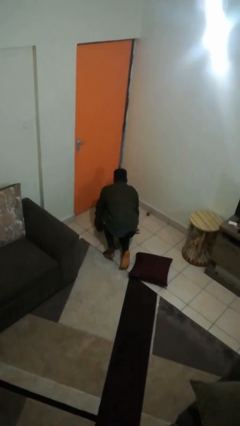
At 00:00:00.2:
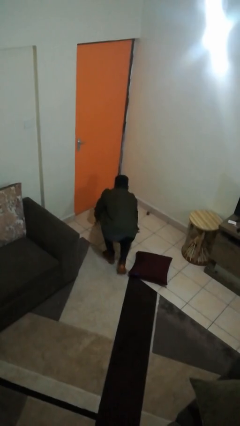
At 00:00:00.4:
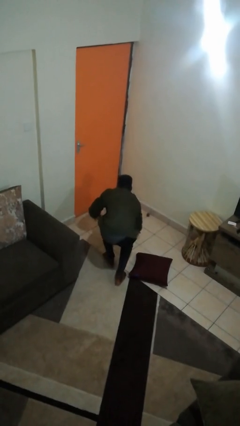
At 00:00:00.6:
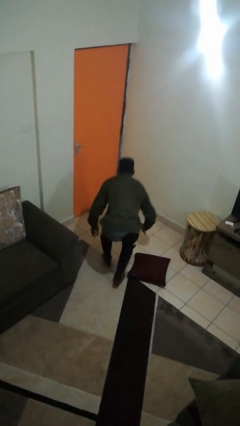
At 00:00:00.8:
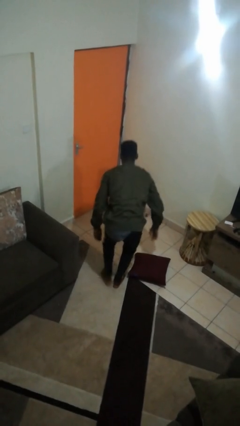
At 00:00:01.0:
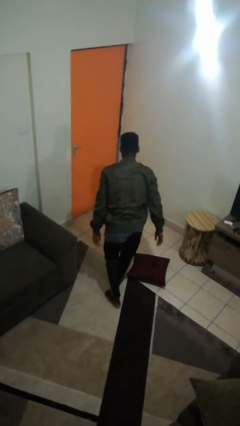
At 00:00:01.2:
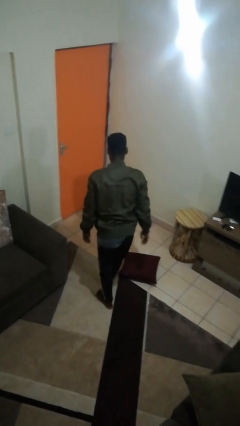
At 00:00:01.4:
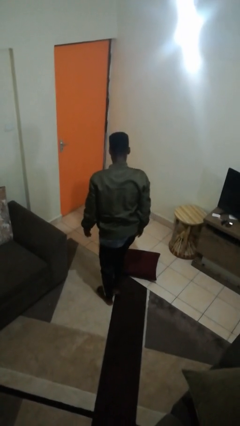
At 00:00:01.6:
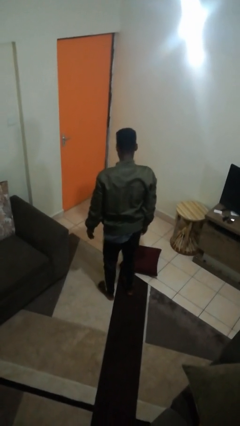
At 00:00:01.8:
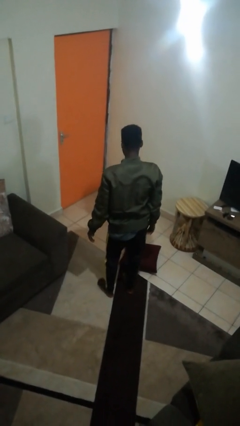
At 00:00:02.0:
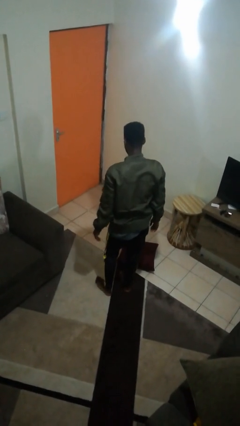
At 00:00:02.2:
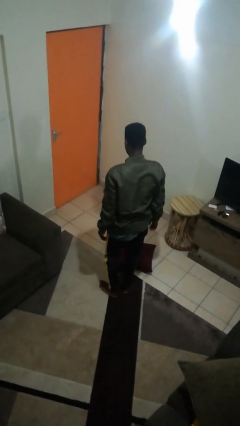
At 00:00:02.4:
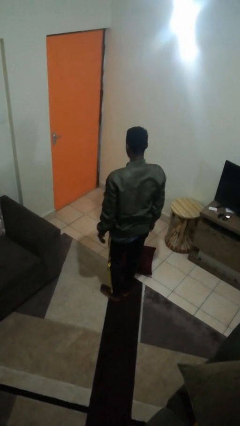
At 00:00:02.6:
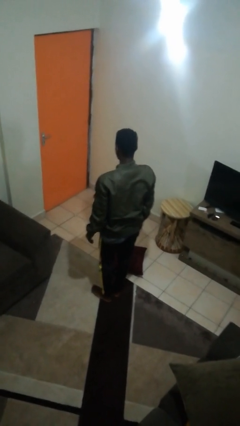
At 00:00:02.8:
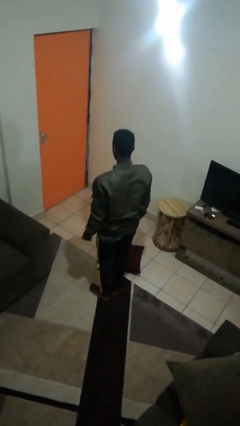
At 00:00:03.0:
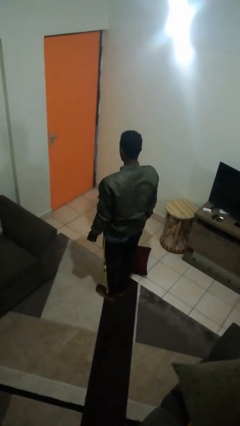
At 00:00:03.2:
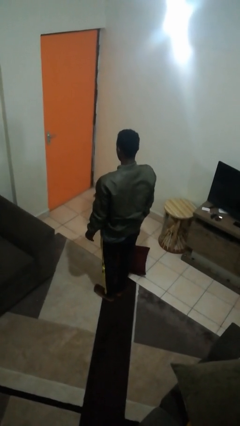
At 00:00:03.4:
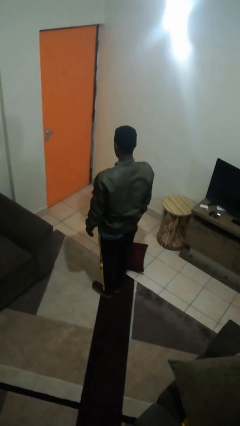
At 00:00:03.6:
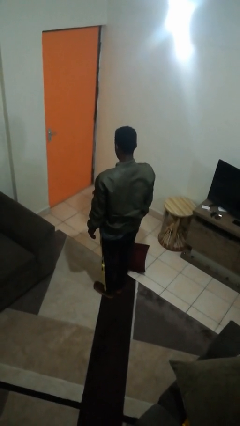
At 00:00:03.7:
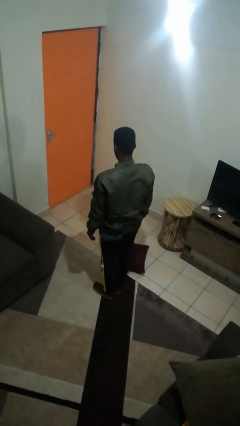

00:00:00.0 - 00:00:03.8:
person stands up from floor

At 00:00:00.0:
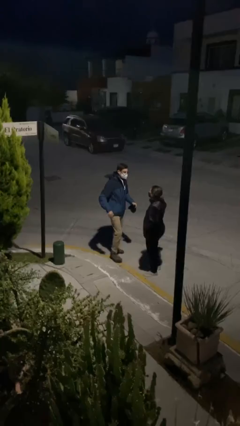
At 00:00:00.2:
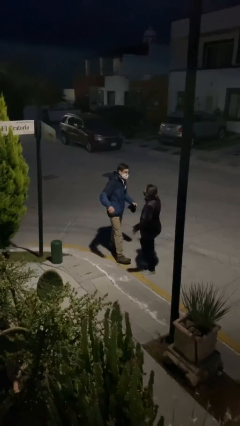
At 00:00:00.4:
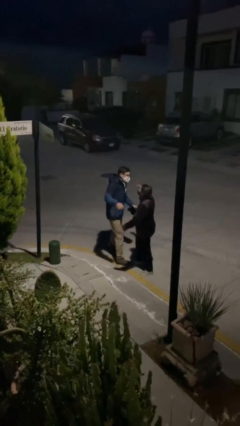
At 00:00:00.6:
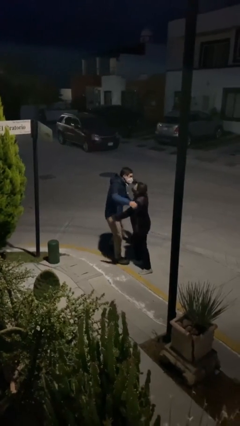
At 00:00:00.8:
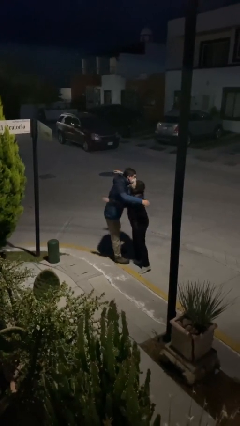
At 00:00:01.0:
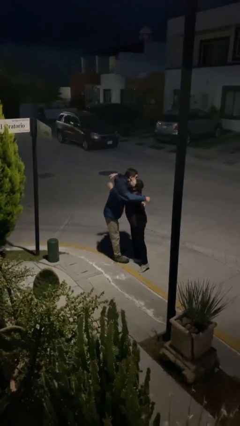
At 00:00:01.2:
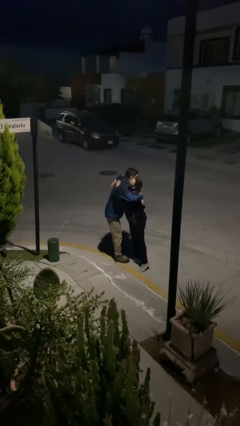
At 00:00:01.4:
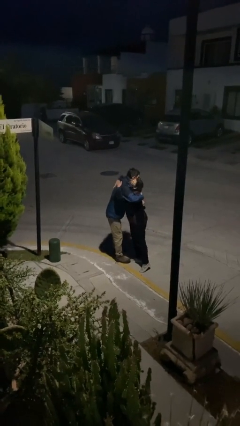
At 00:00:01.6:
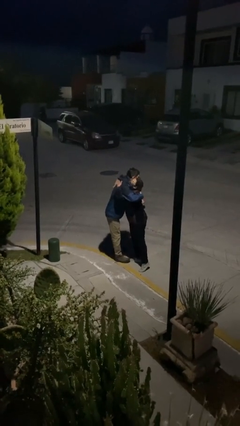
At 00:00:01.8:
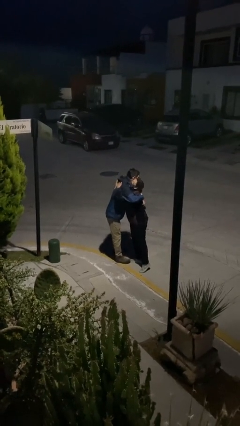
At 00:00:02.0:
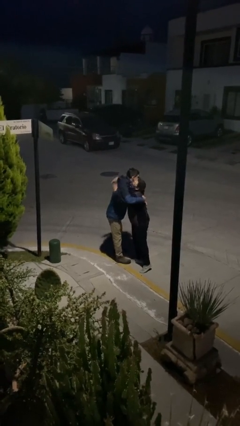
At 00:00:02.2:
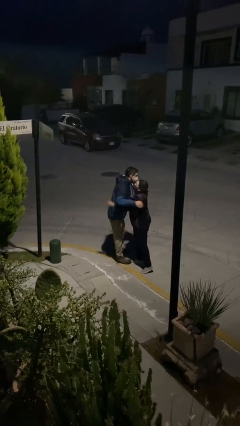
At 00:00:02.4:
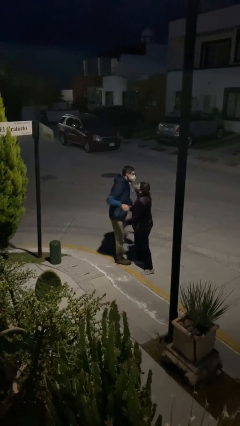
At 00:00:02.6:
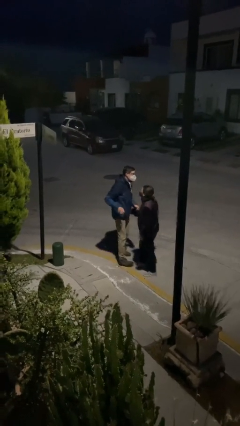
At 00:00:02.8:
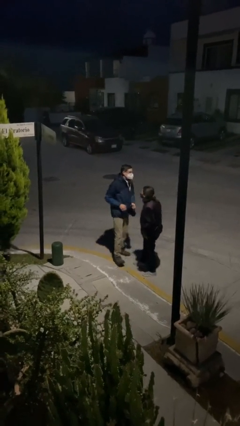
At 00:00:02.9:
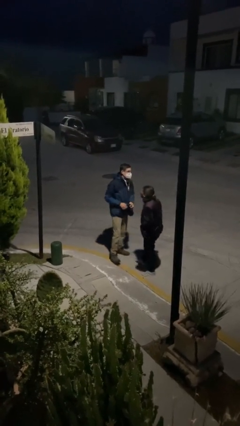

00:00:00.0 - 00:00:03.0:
person embraces person

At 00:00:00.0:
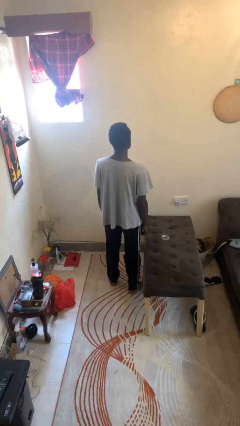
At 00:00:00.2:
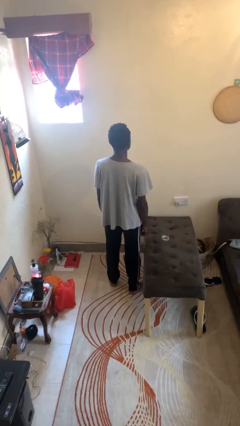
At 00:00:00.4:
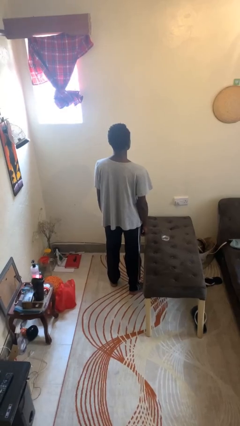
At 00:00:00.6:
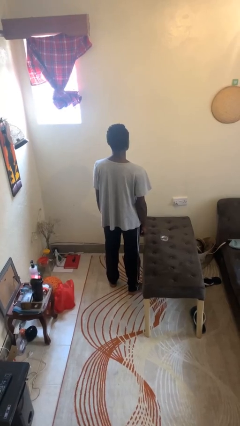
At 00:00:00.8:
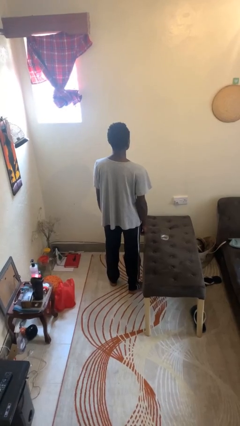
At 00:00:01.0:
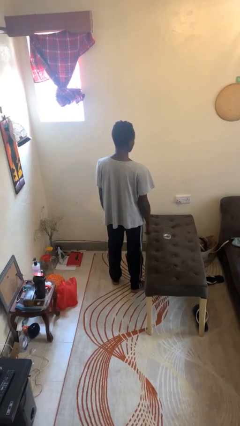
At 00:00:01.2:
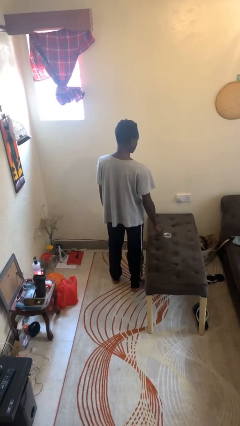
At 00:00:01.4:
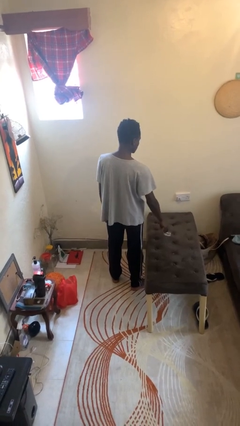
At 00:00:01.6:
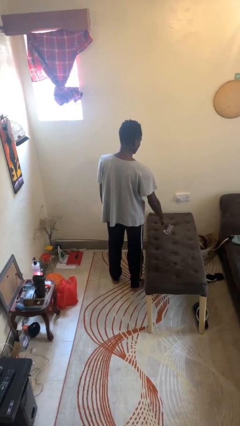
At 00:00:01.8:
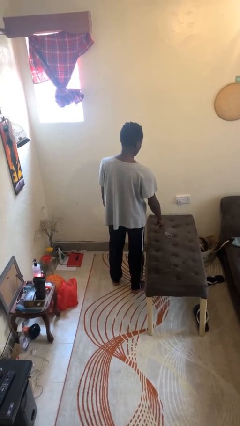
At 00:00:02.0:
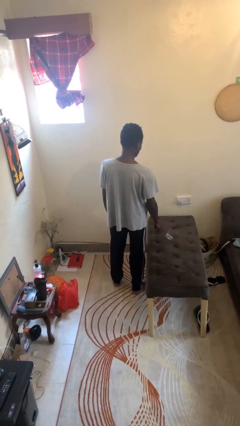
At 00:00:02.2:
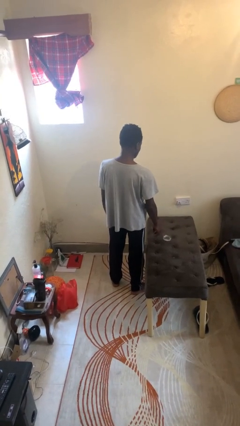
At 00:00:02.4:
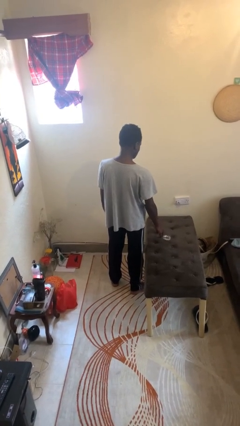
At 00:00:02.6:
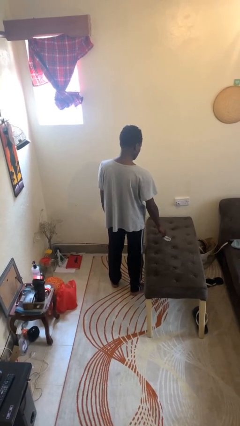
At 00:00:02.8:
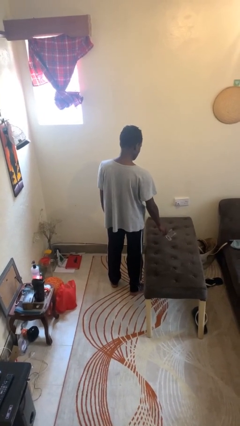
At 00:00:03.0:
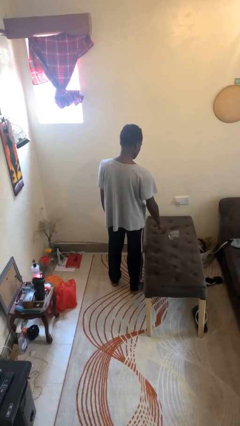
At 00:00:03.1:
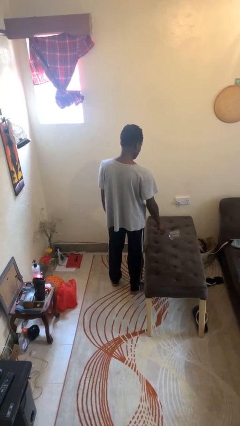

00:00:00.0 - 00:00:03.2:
person knocks over glass

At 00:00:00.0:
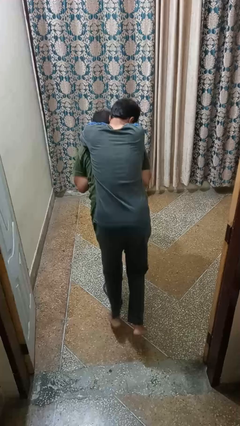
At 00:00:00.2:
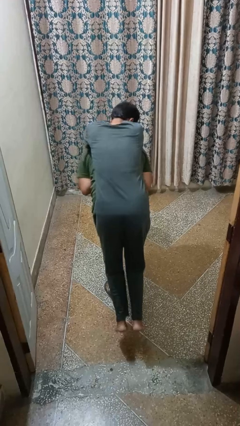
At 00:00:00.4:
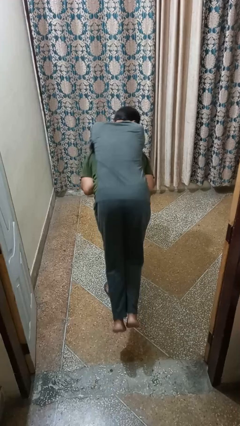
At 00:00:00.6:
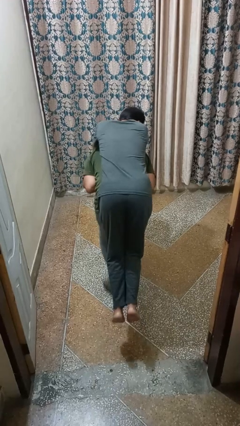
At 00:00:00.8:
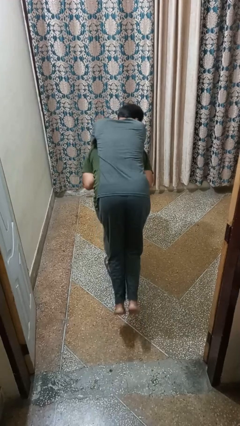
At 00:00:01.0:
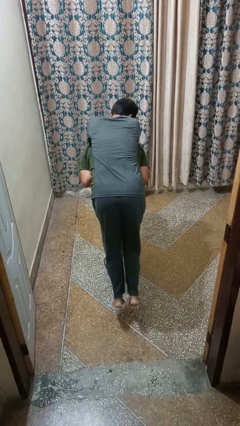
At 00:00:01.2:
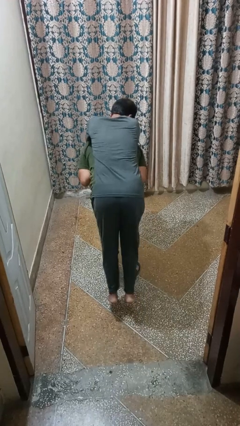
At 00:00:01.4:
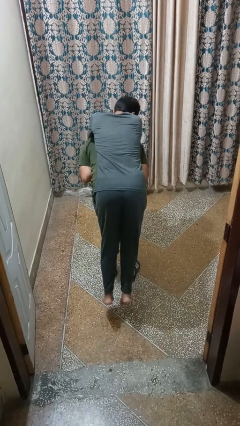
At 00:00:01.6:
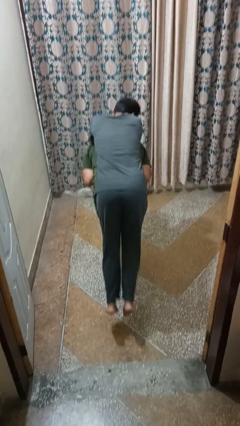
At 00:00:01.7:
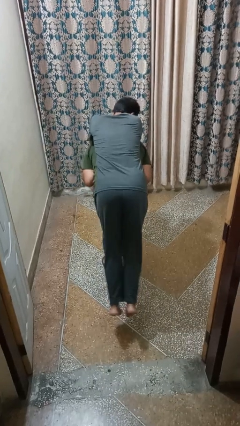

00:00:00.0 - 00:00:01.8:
person carries person on back

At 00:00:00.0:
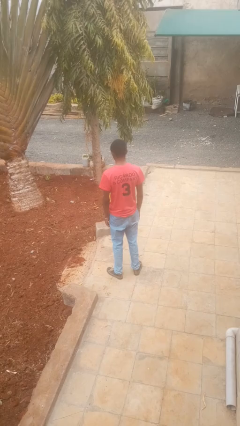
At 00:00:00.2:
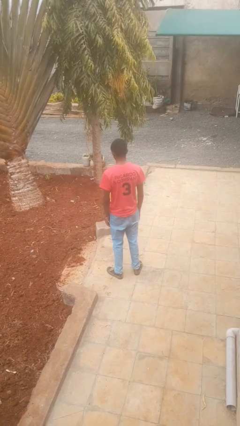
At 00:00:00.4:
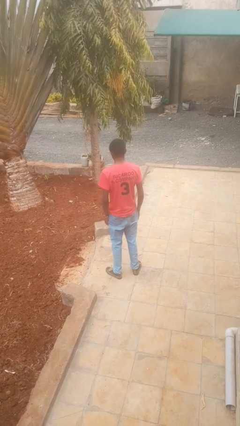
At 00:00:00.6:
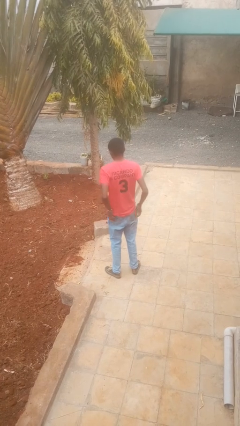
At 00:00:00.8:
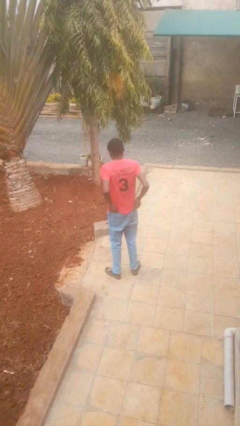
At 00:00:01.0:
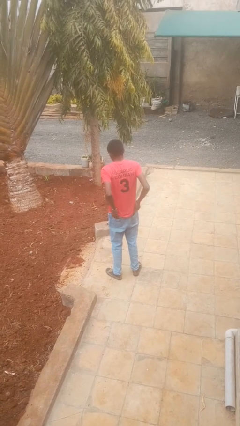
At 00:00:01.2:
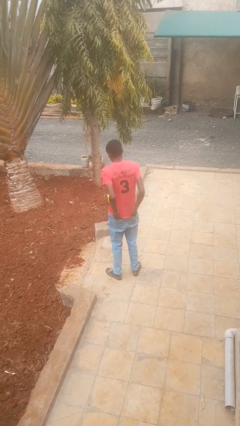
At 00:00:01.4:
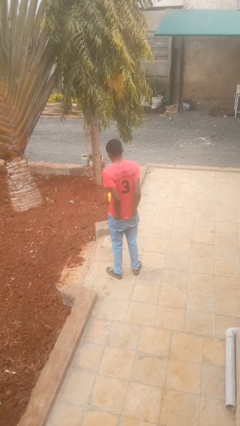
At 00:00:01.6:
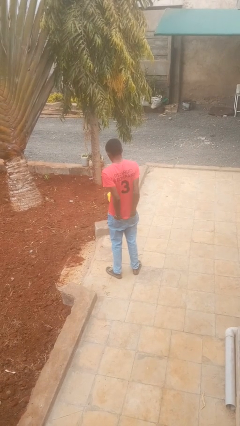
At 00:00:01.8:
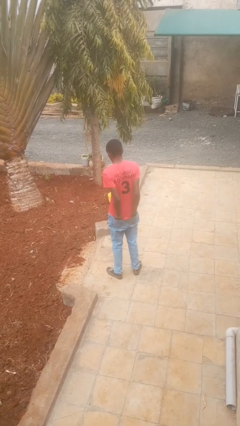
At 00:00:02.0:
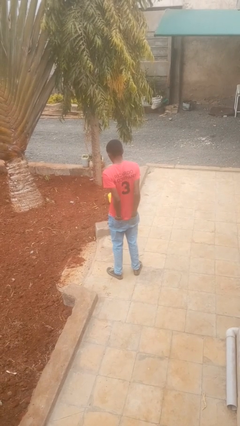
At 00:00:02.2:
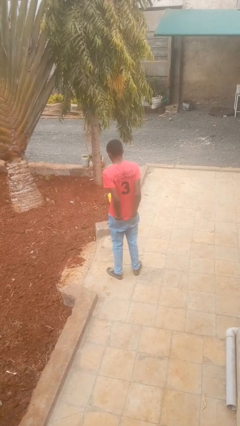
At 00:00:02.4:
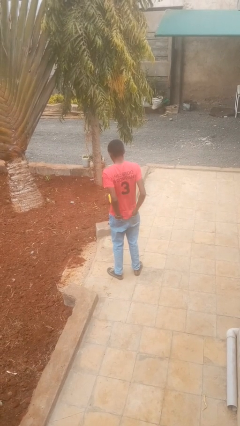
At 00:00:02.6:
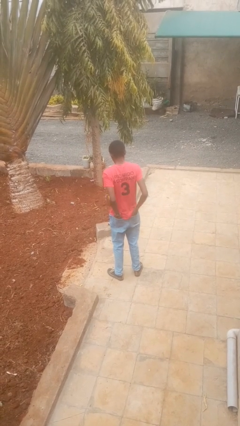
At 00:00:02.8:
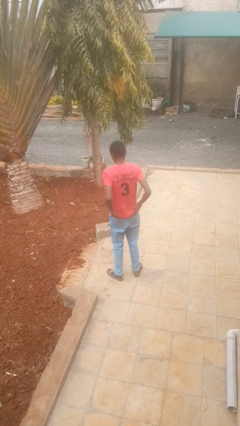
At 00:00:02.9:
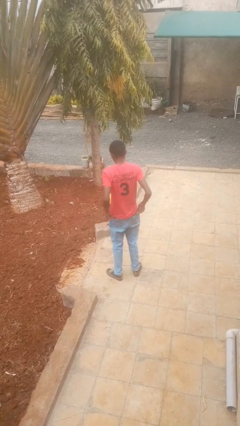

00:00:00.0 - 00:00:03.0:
person puts hands in back pockets

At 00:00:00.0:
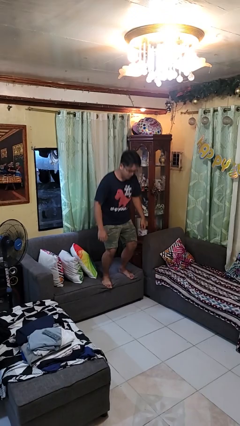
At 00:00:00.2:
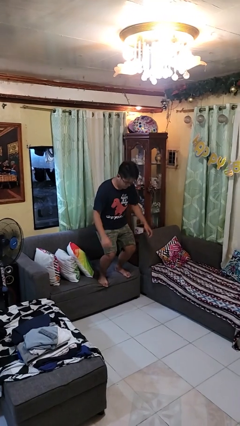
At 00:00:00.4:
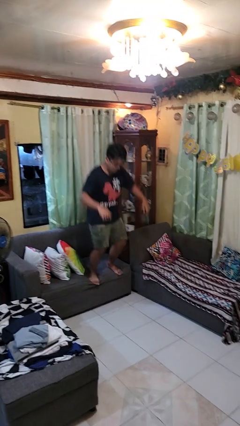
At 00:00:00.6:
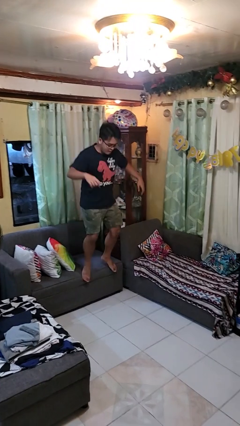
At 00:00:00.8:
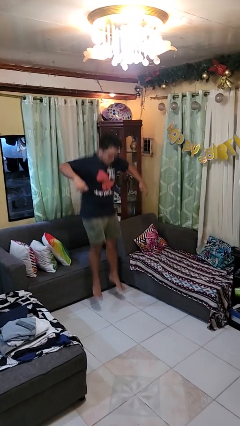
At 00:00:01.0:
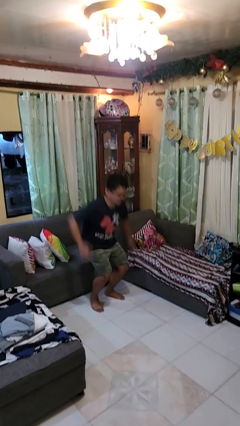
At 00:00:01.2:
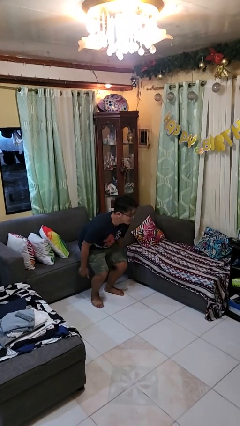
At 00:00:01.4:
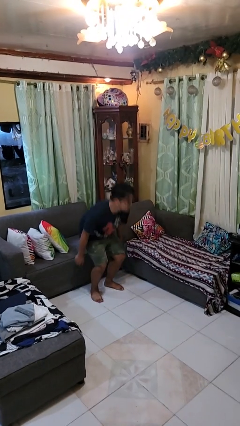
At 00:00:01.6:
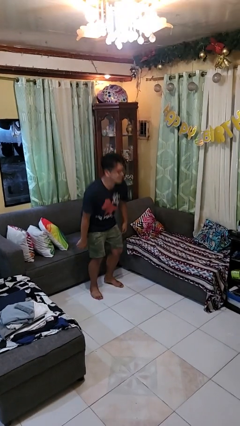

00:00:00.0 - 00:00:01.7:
person jumps on couch

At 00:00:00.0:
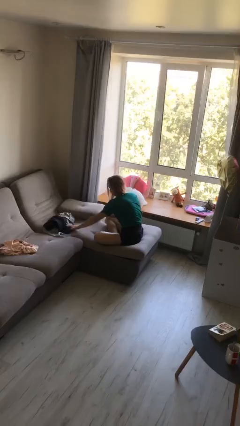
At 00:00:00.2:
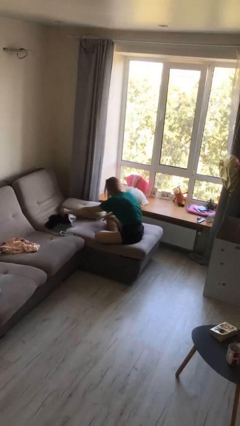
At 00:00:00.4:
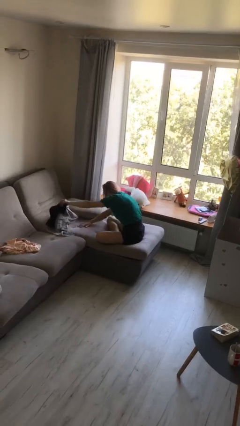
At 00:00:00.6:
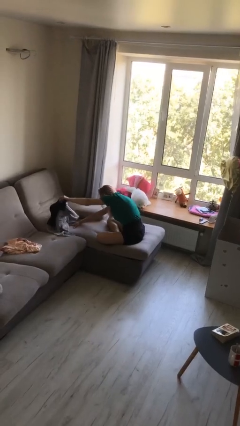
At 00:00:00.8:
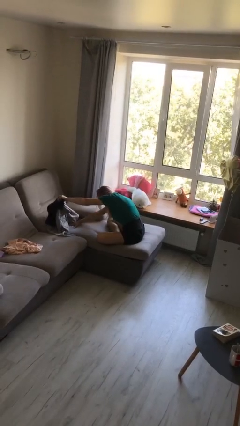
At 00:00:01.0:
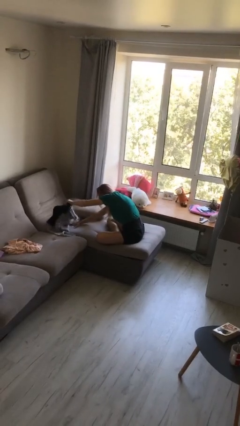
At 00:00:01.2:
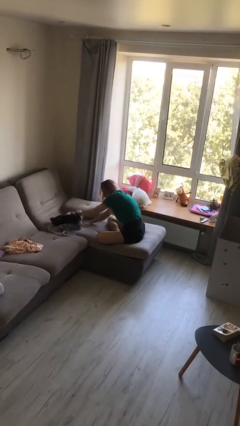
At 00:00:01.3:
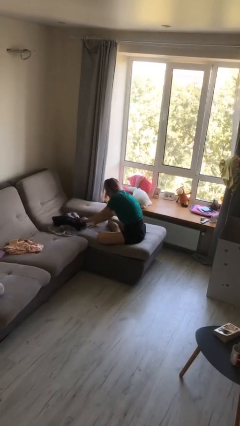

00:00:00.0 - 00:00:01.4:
person searches in couch
